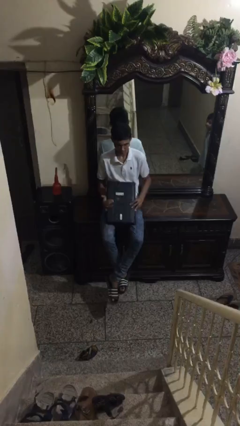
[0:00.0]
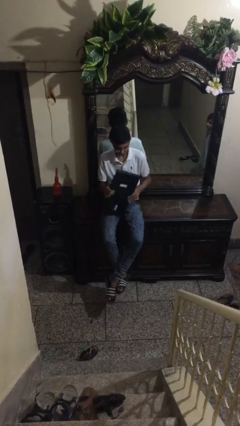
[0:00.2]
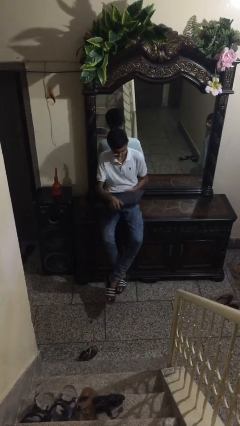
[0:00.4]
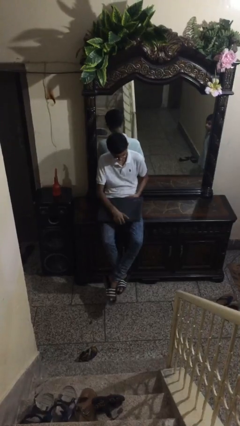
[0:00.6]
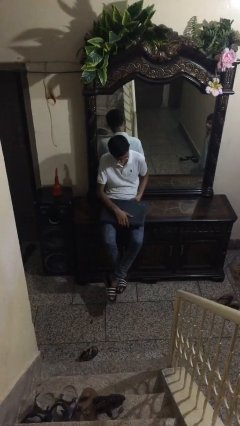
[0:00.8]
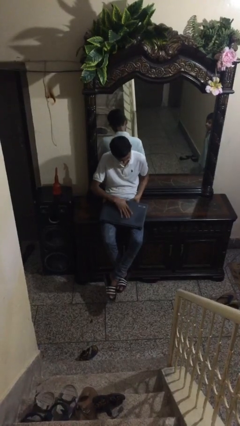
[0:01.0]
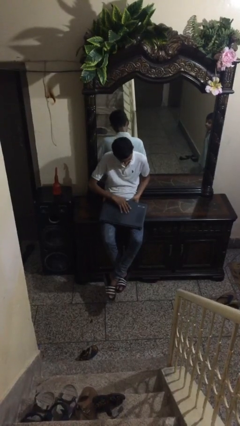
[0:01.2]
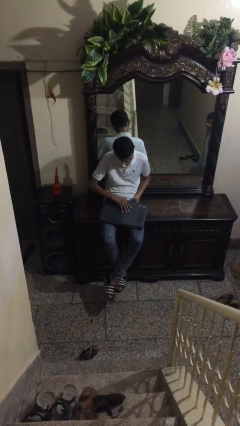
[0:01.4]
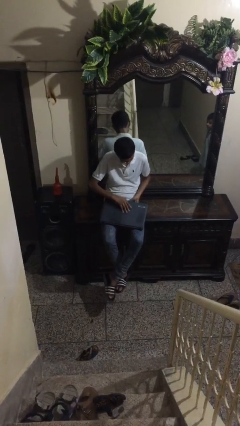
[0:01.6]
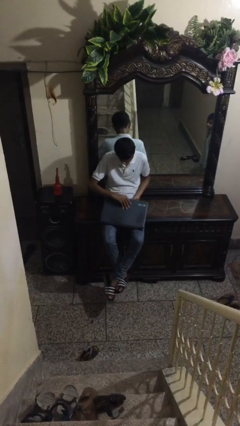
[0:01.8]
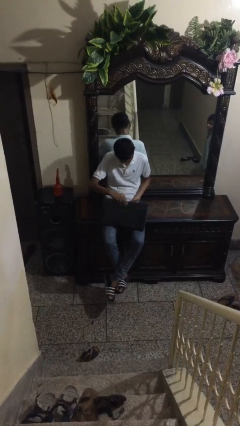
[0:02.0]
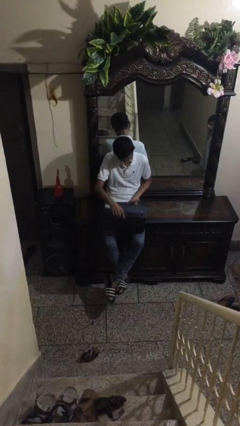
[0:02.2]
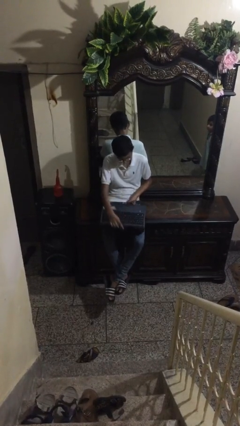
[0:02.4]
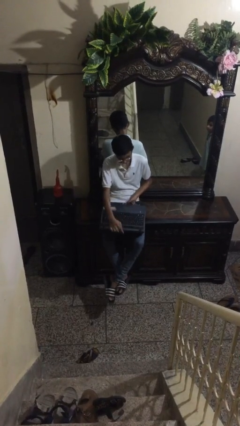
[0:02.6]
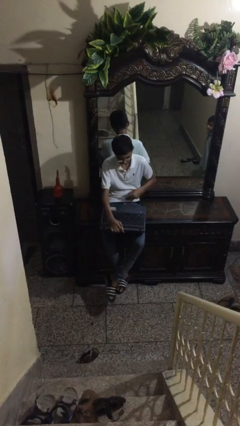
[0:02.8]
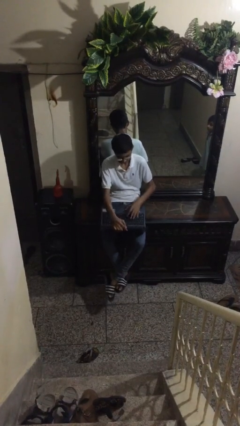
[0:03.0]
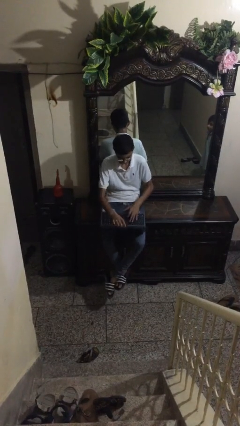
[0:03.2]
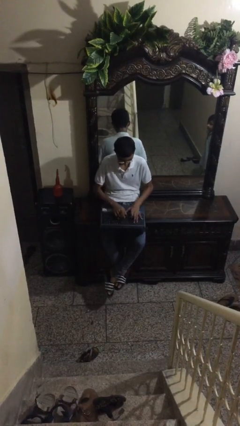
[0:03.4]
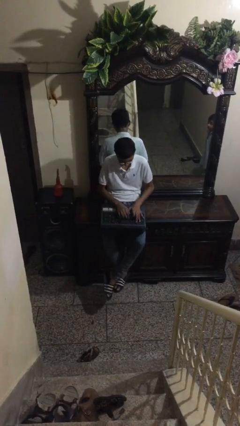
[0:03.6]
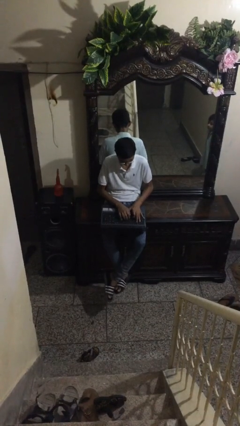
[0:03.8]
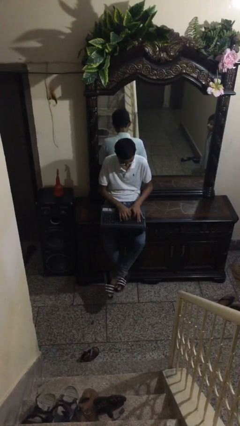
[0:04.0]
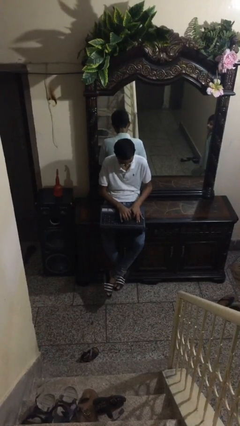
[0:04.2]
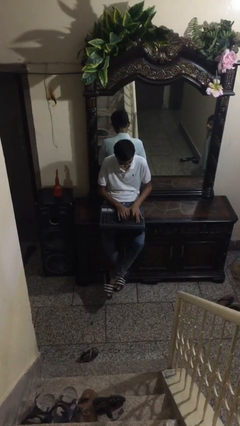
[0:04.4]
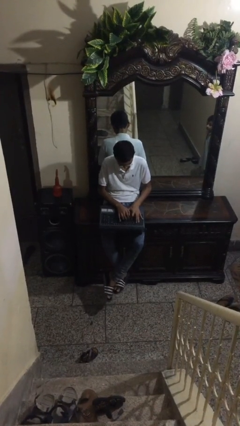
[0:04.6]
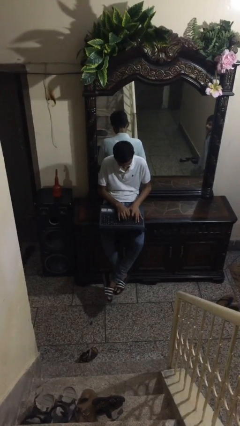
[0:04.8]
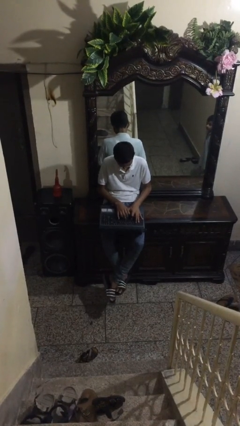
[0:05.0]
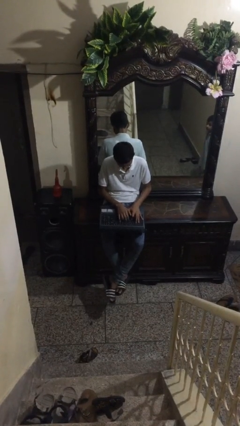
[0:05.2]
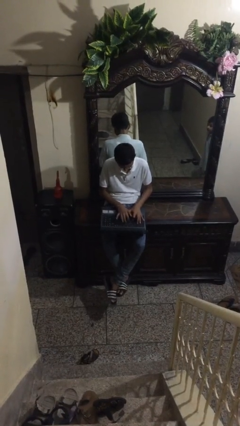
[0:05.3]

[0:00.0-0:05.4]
person interacts with laptop

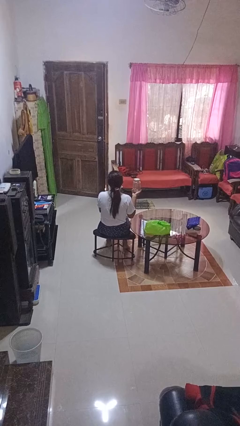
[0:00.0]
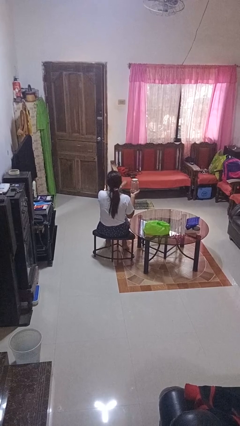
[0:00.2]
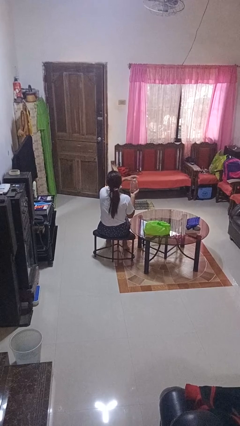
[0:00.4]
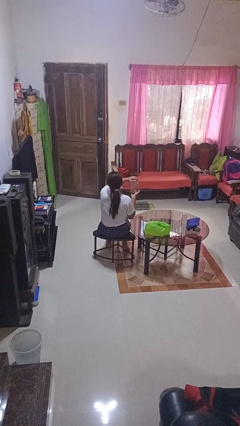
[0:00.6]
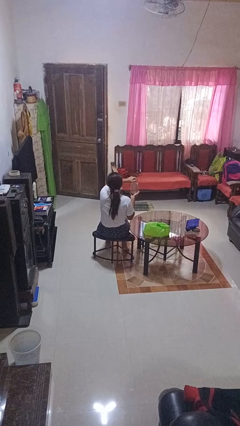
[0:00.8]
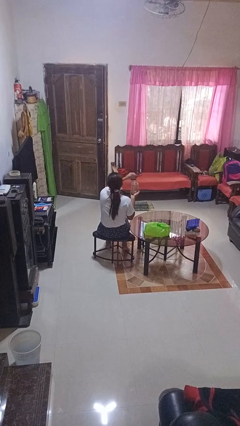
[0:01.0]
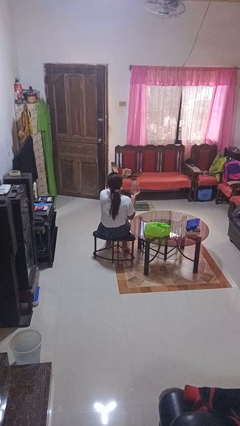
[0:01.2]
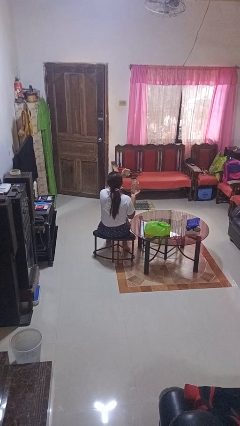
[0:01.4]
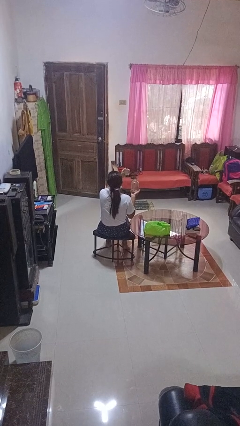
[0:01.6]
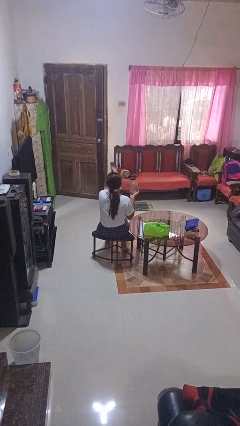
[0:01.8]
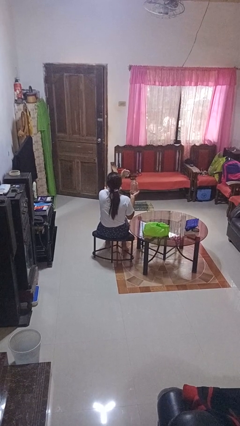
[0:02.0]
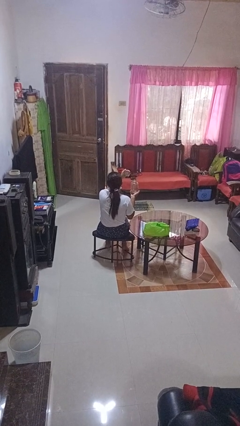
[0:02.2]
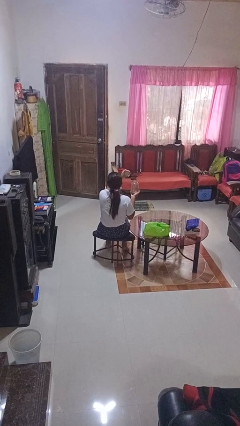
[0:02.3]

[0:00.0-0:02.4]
person opens jar

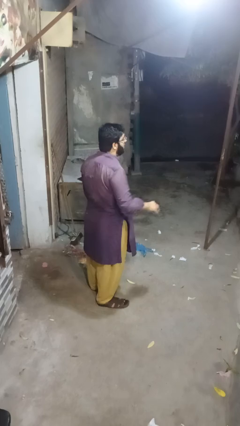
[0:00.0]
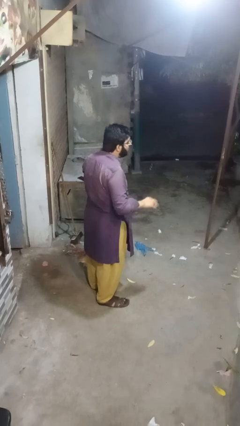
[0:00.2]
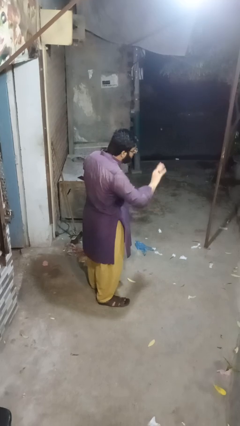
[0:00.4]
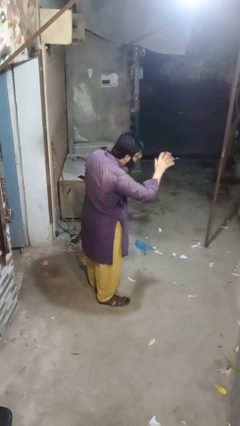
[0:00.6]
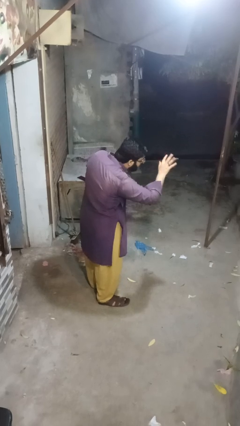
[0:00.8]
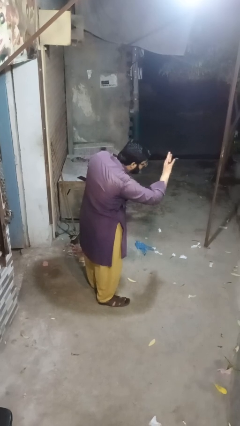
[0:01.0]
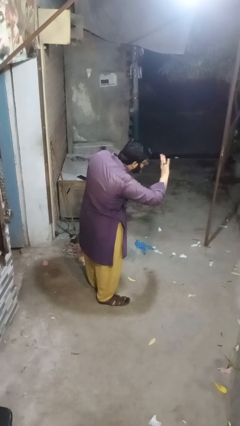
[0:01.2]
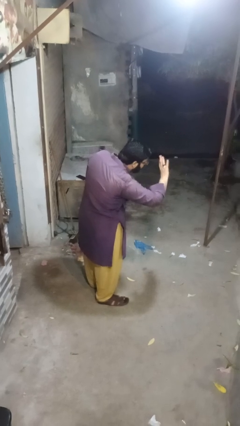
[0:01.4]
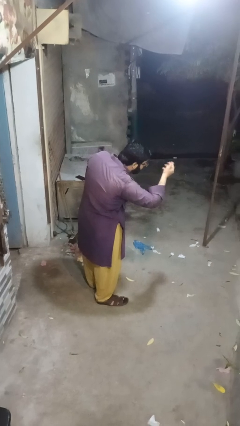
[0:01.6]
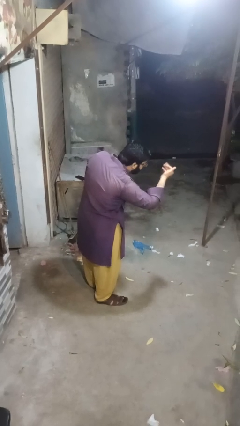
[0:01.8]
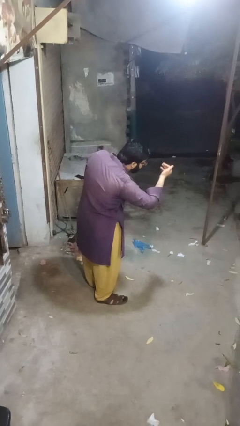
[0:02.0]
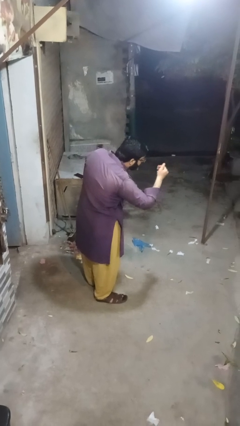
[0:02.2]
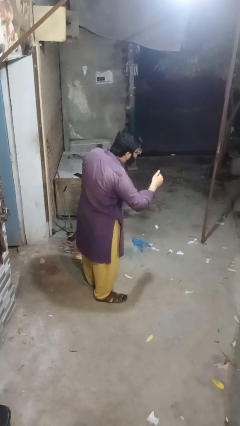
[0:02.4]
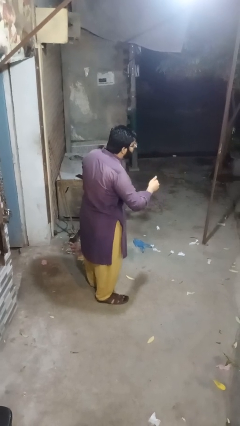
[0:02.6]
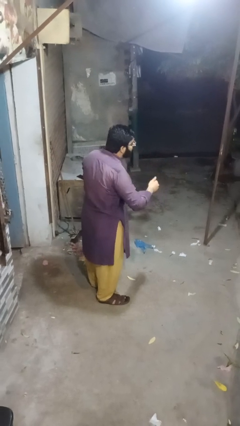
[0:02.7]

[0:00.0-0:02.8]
person gestures lower hand

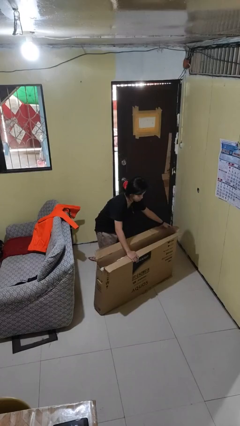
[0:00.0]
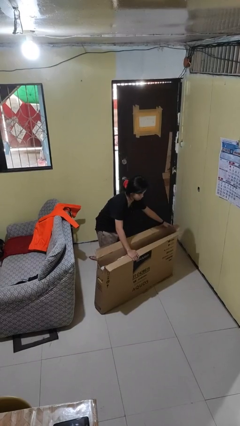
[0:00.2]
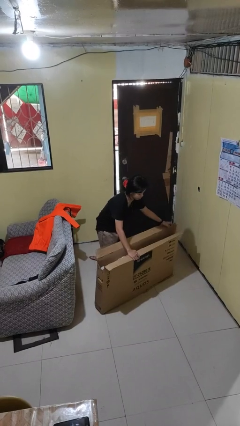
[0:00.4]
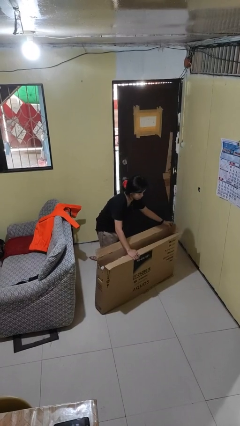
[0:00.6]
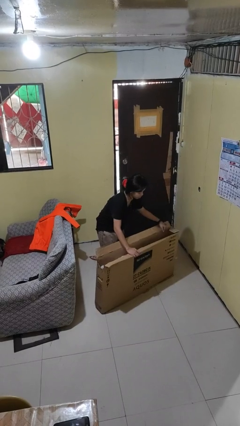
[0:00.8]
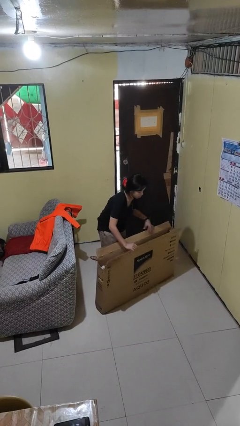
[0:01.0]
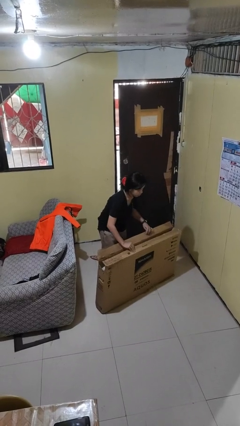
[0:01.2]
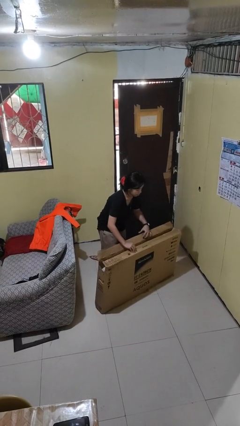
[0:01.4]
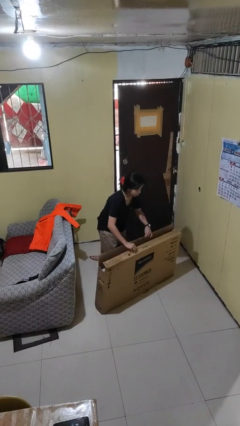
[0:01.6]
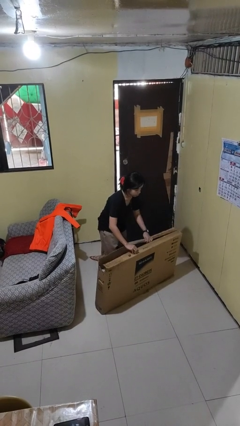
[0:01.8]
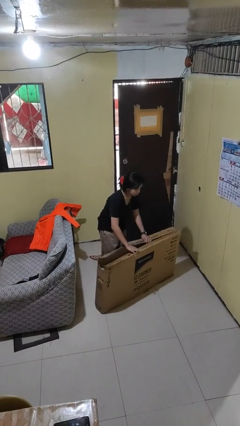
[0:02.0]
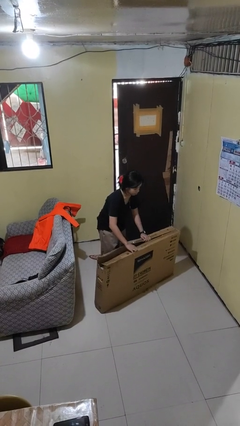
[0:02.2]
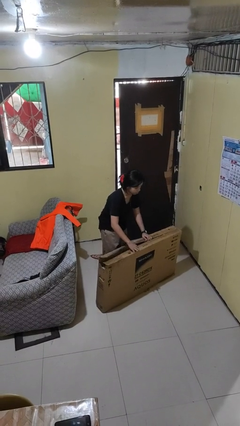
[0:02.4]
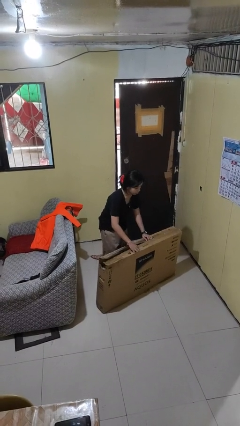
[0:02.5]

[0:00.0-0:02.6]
person closes box

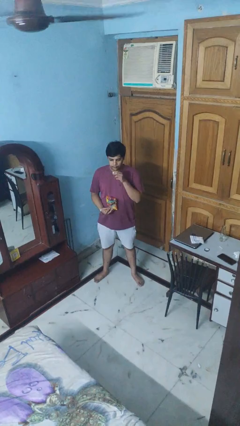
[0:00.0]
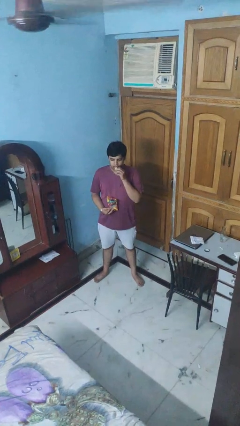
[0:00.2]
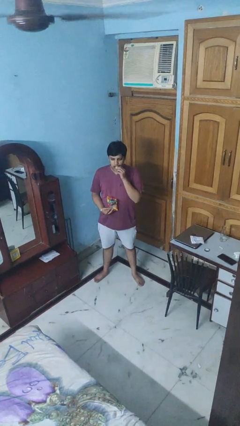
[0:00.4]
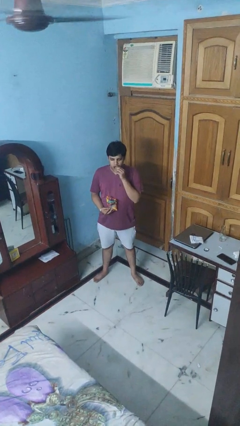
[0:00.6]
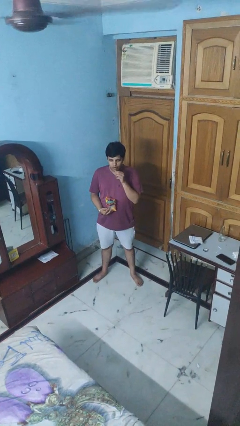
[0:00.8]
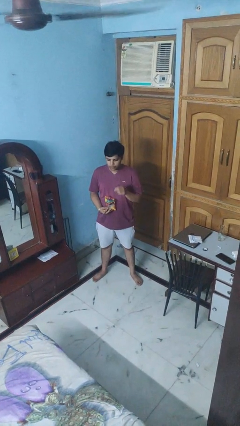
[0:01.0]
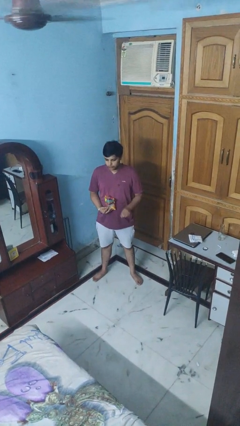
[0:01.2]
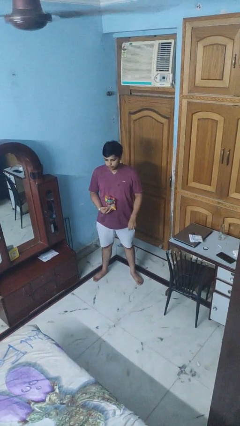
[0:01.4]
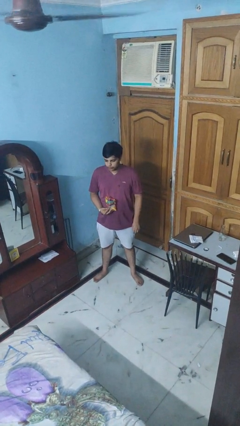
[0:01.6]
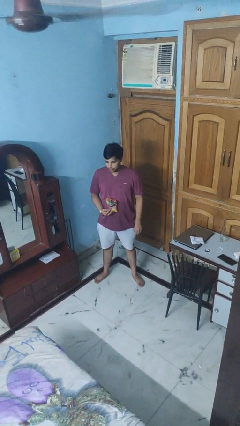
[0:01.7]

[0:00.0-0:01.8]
person eats snack from bag

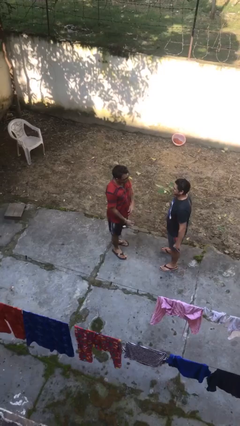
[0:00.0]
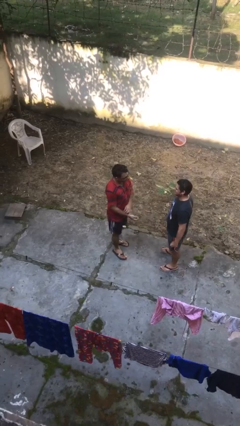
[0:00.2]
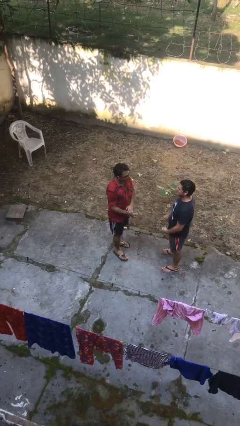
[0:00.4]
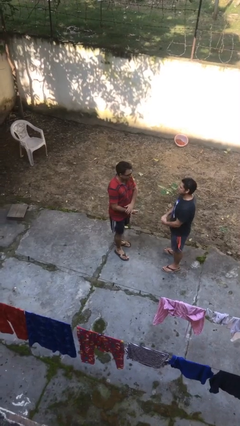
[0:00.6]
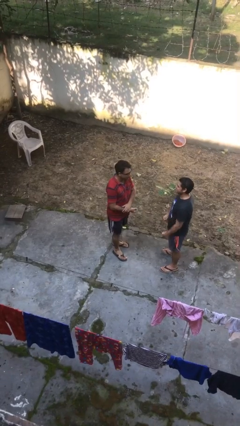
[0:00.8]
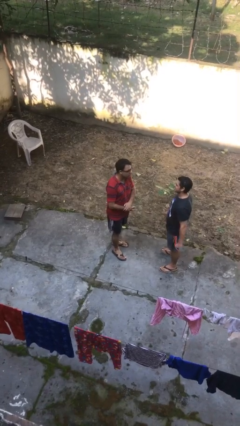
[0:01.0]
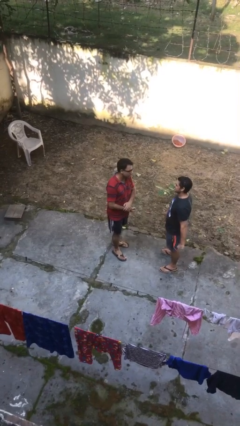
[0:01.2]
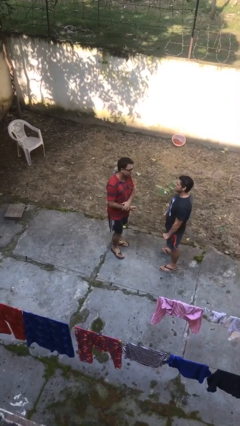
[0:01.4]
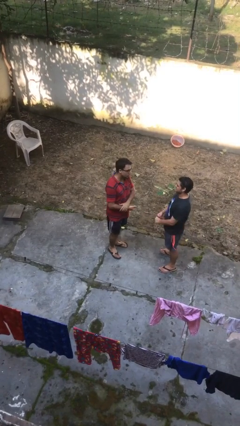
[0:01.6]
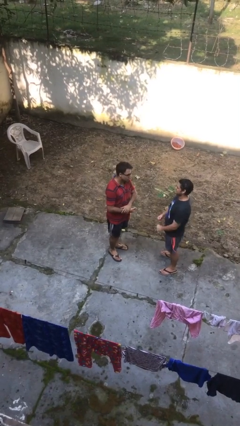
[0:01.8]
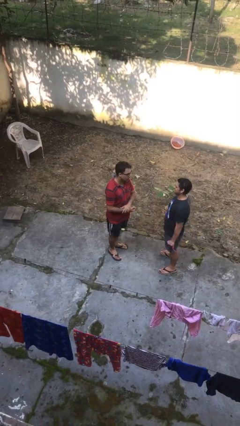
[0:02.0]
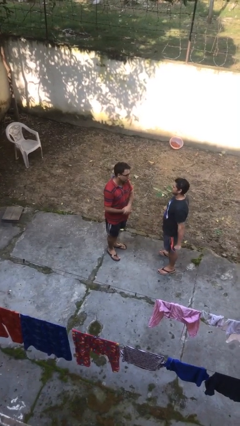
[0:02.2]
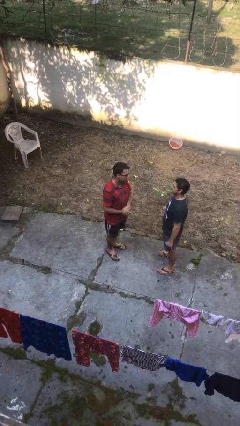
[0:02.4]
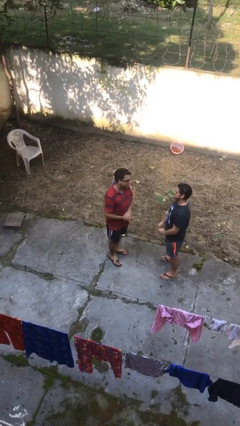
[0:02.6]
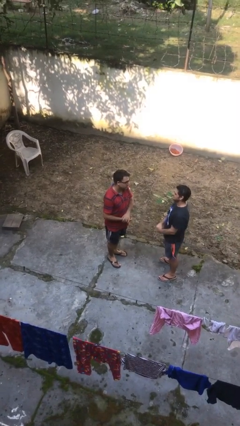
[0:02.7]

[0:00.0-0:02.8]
person talks to person
